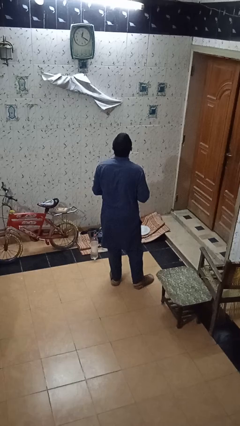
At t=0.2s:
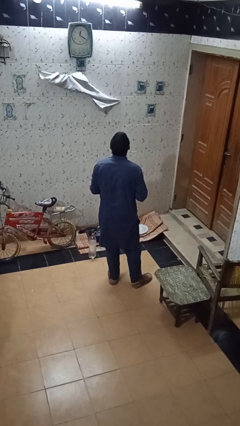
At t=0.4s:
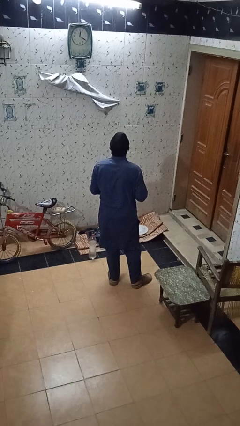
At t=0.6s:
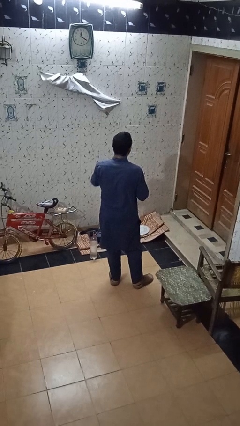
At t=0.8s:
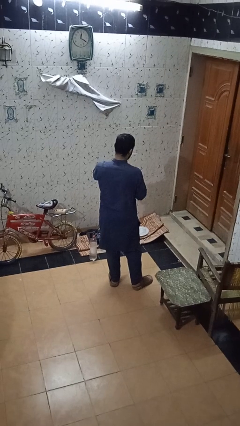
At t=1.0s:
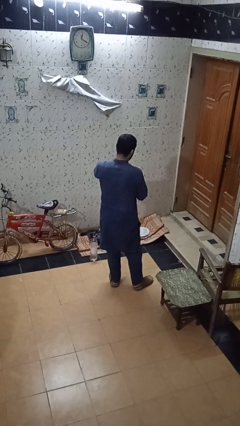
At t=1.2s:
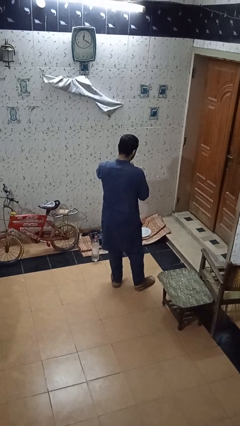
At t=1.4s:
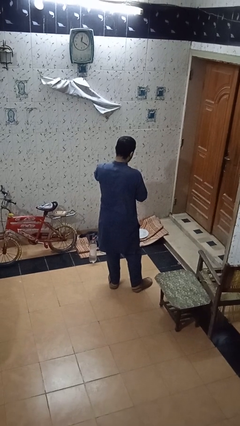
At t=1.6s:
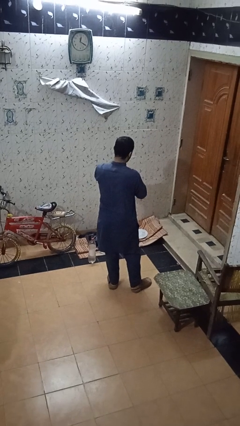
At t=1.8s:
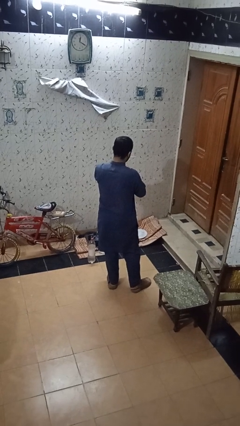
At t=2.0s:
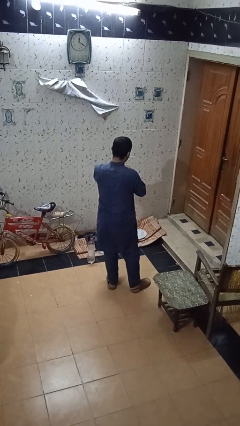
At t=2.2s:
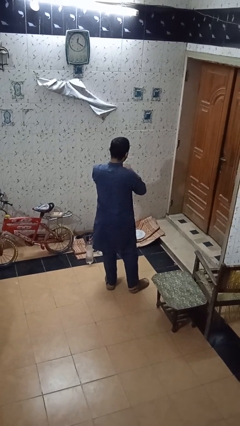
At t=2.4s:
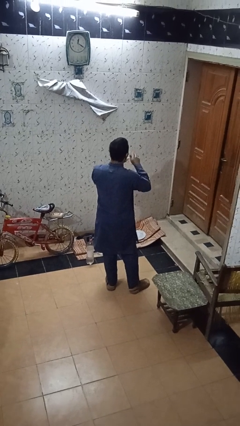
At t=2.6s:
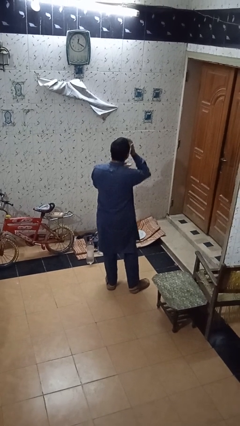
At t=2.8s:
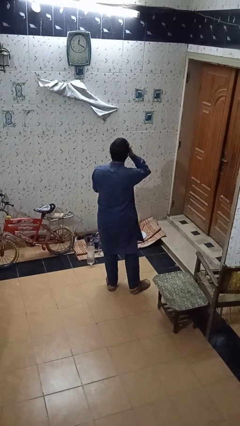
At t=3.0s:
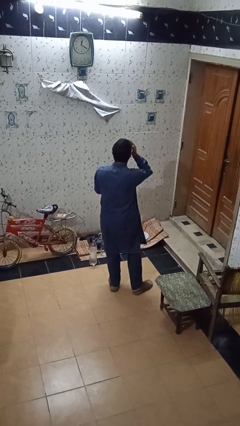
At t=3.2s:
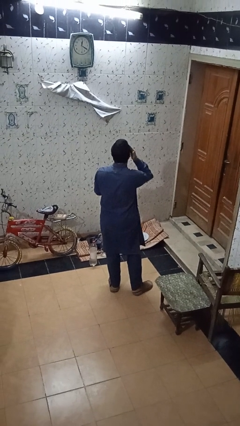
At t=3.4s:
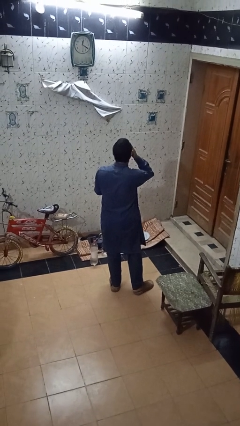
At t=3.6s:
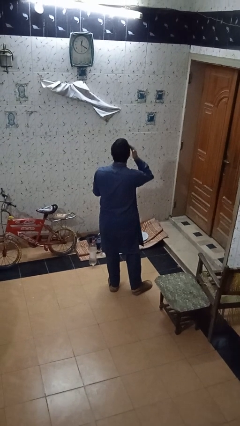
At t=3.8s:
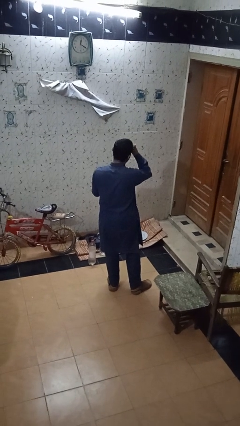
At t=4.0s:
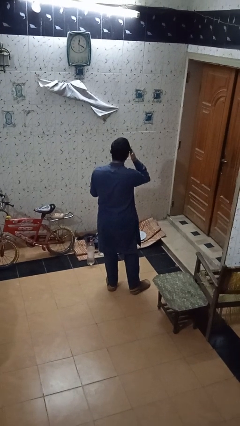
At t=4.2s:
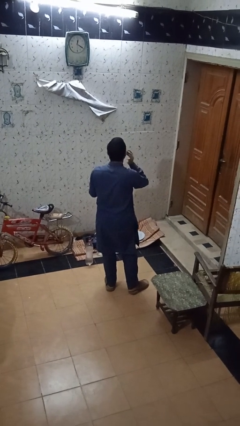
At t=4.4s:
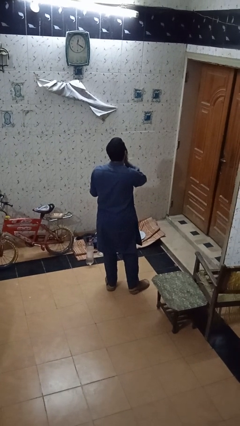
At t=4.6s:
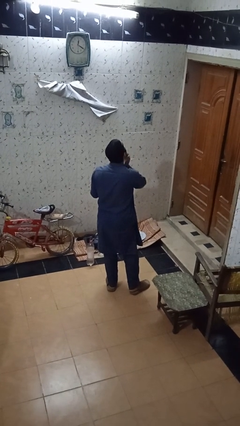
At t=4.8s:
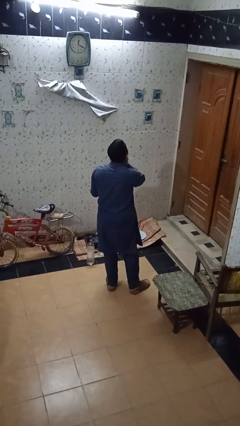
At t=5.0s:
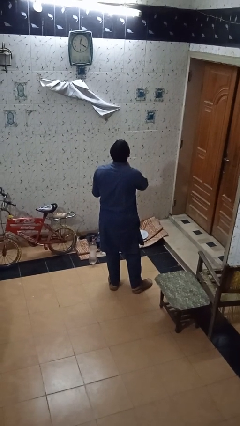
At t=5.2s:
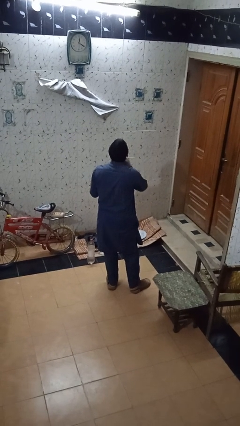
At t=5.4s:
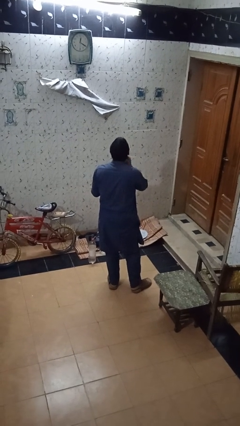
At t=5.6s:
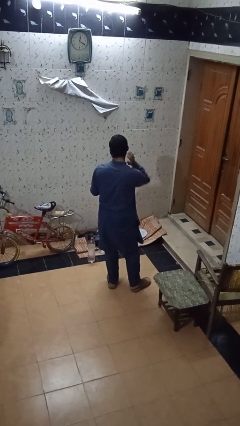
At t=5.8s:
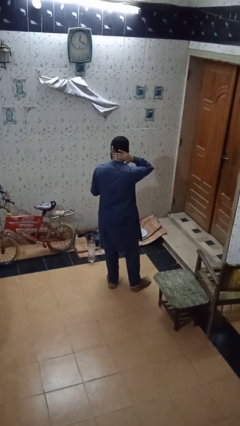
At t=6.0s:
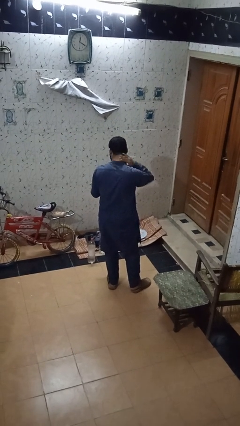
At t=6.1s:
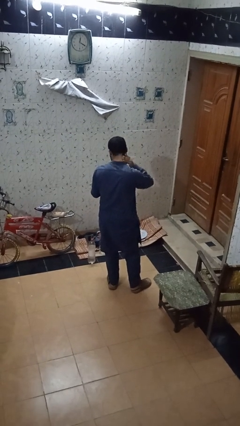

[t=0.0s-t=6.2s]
person applies sunscreen

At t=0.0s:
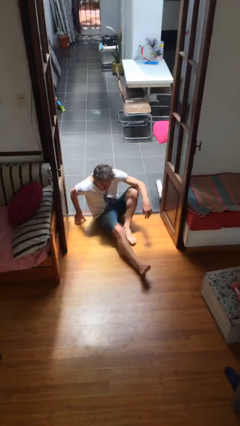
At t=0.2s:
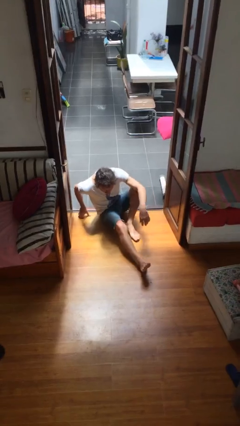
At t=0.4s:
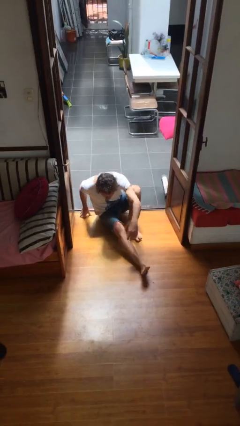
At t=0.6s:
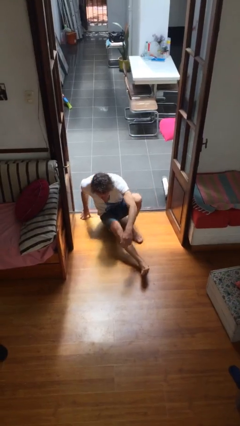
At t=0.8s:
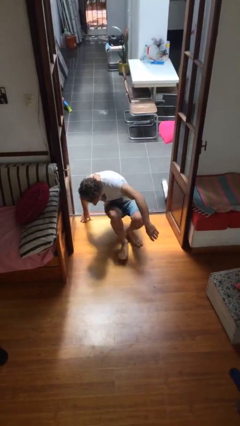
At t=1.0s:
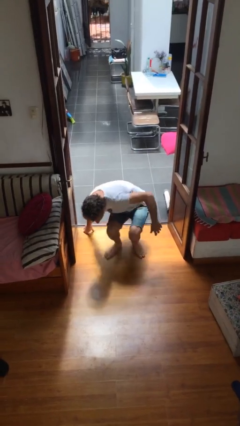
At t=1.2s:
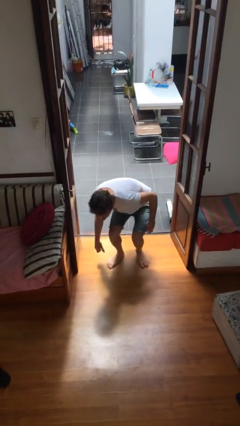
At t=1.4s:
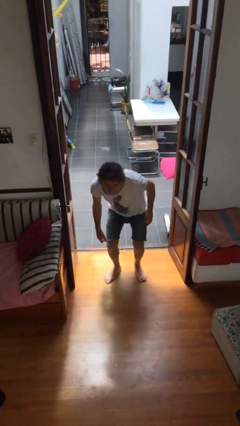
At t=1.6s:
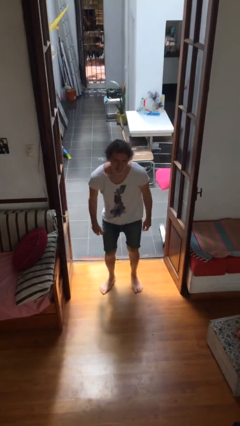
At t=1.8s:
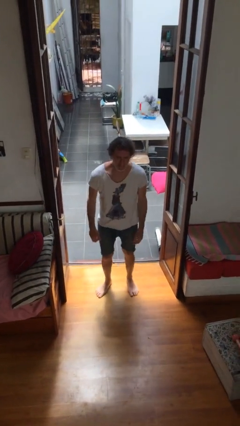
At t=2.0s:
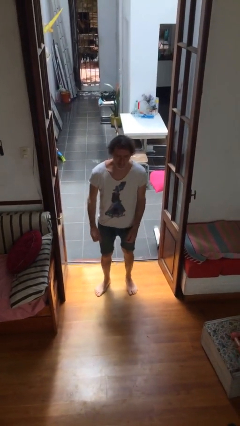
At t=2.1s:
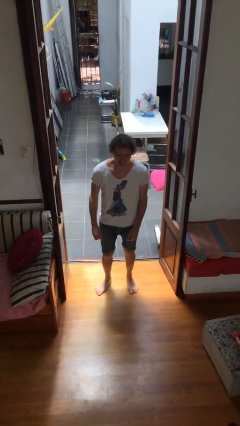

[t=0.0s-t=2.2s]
person stands up

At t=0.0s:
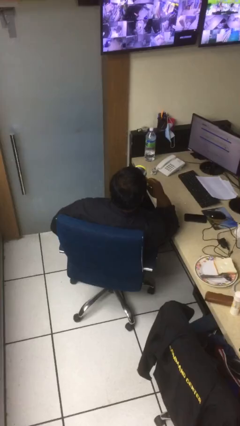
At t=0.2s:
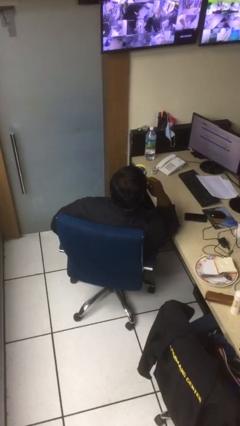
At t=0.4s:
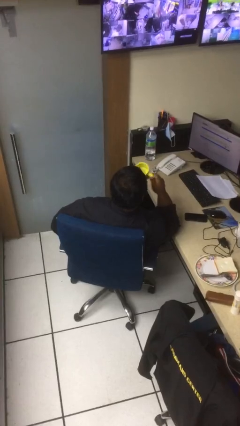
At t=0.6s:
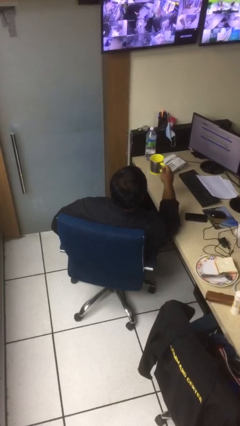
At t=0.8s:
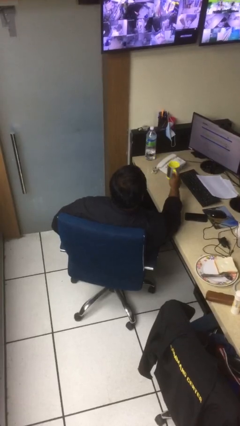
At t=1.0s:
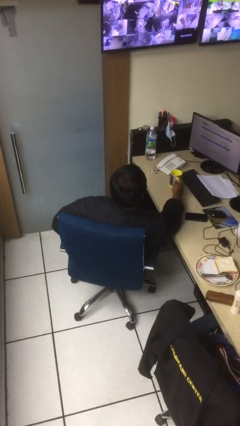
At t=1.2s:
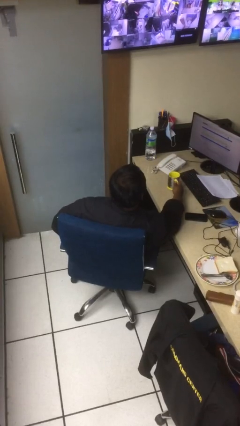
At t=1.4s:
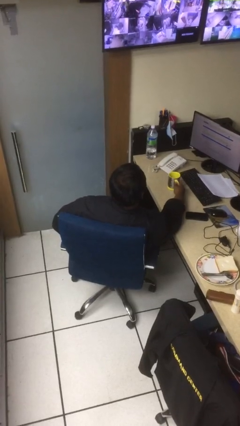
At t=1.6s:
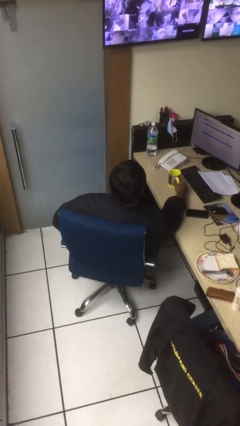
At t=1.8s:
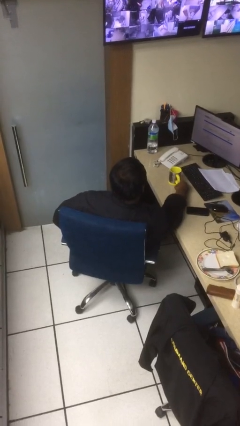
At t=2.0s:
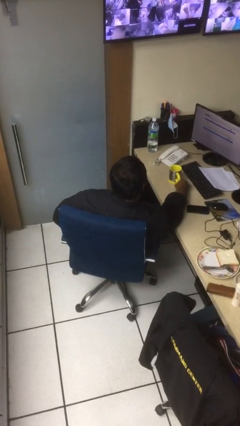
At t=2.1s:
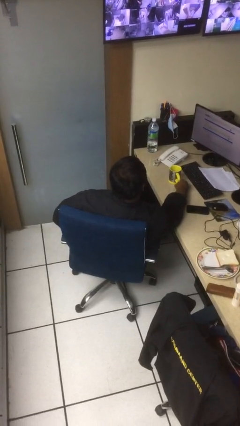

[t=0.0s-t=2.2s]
person puts down object on table

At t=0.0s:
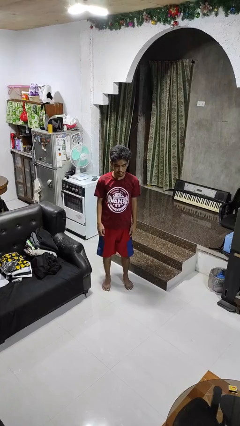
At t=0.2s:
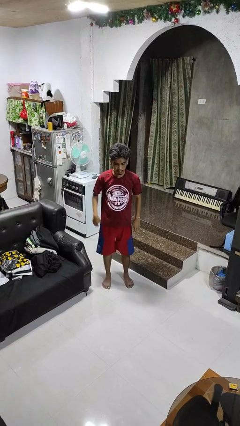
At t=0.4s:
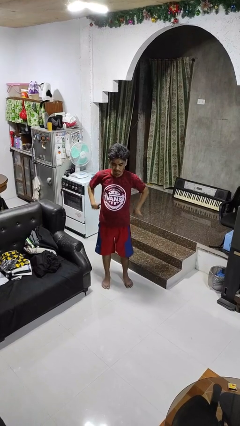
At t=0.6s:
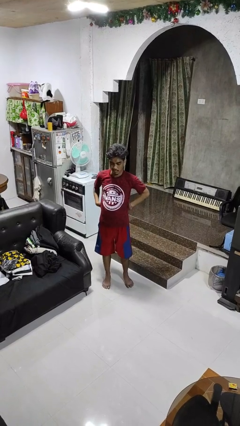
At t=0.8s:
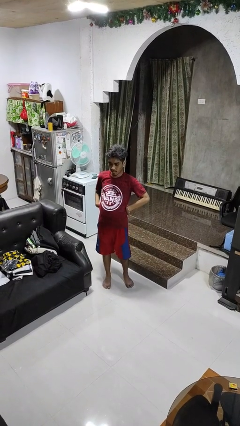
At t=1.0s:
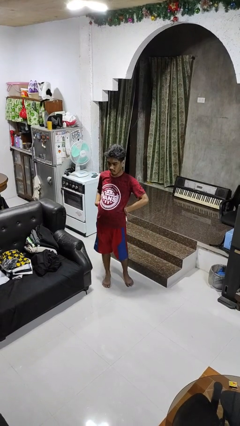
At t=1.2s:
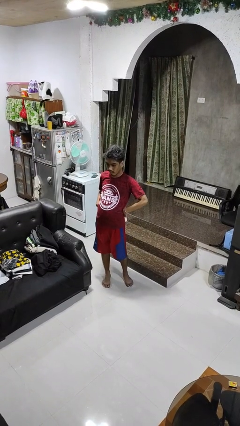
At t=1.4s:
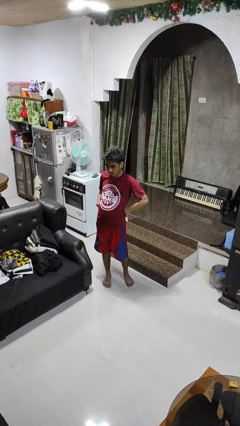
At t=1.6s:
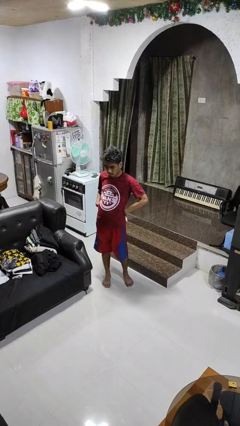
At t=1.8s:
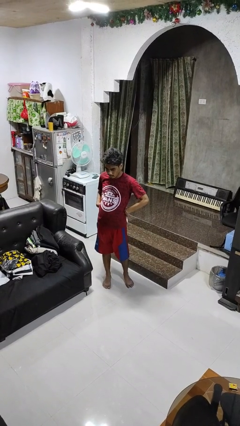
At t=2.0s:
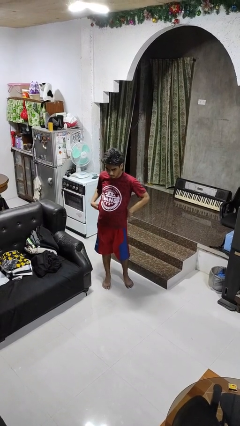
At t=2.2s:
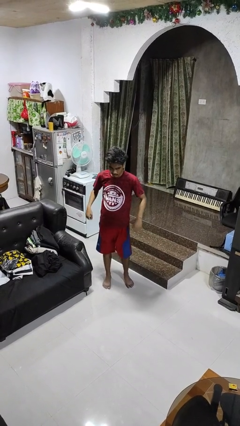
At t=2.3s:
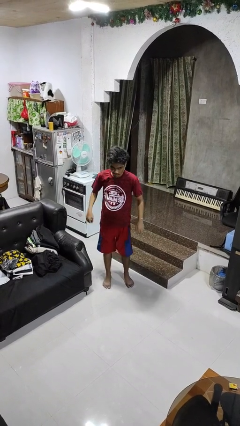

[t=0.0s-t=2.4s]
person stretches back

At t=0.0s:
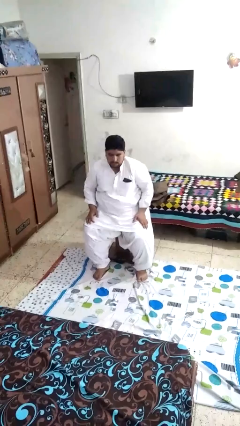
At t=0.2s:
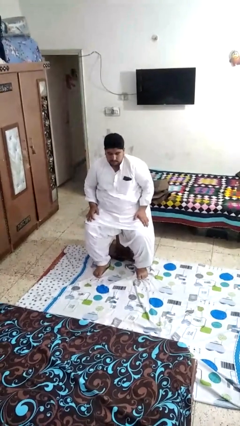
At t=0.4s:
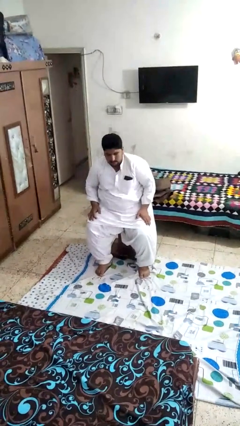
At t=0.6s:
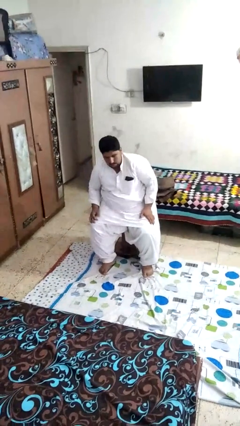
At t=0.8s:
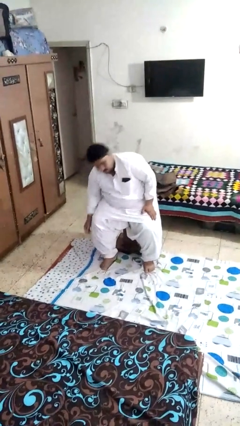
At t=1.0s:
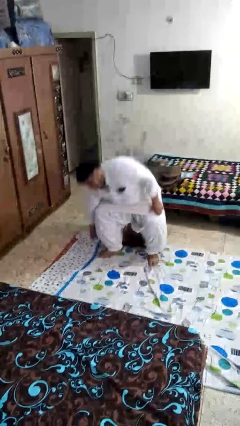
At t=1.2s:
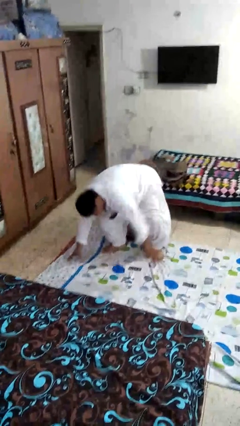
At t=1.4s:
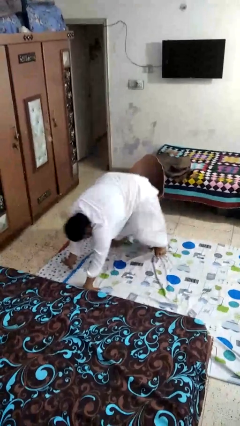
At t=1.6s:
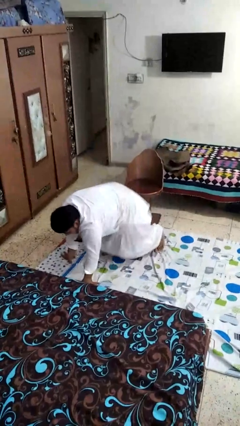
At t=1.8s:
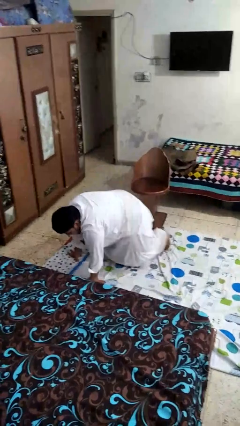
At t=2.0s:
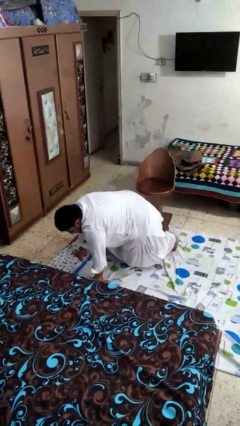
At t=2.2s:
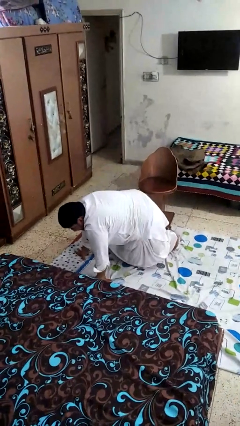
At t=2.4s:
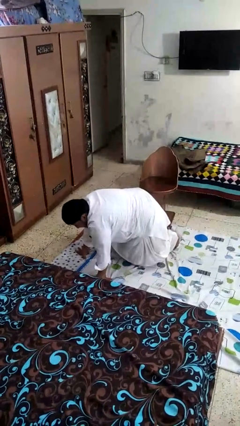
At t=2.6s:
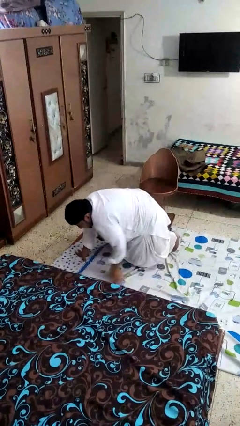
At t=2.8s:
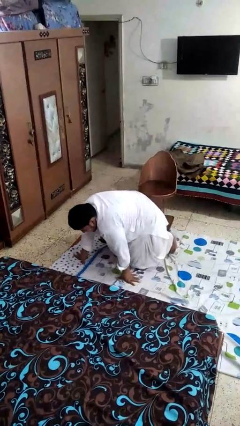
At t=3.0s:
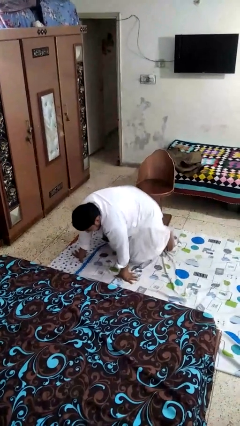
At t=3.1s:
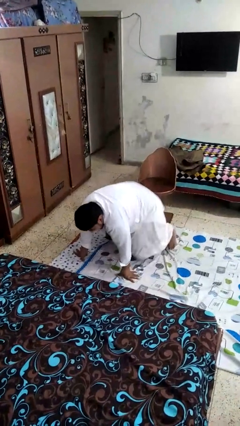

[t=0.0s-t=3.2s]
person falls from chair

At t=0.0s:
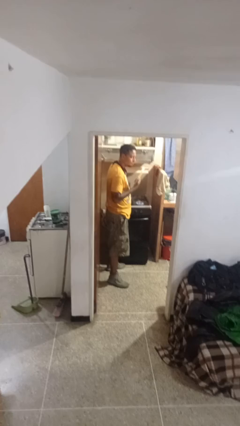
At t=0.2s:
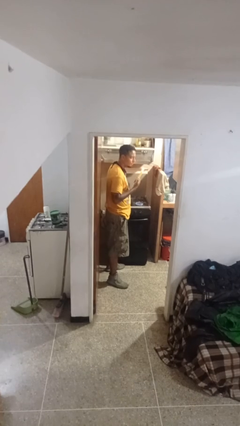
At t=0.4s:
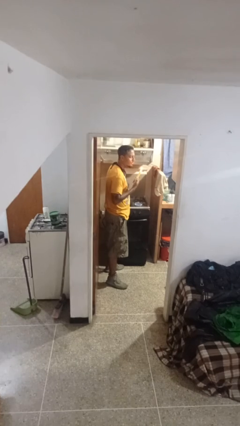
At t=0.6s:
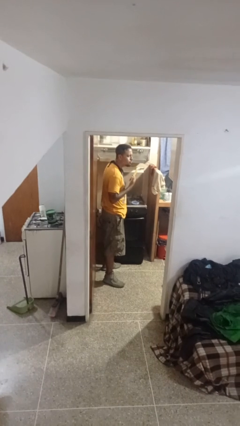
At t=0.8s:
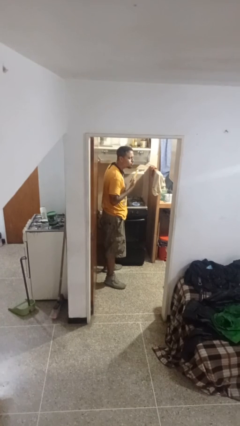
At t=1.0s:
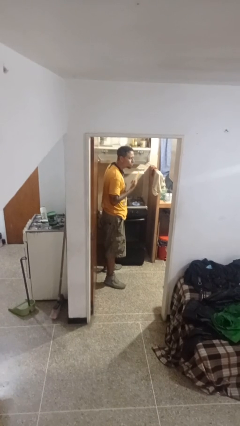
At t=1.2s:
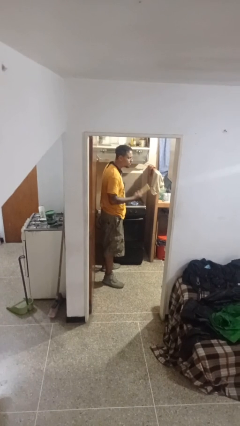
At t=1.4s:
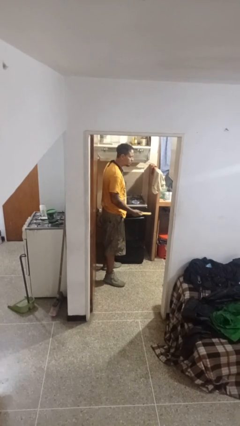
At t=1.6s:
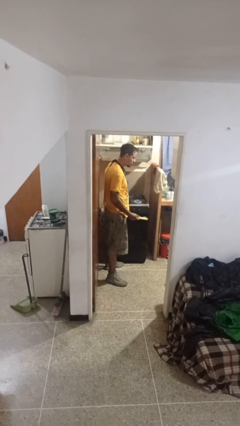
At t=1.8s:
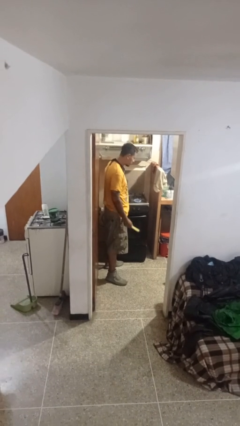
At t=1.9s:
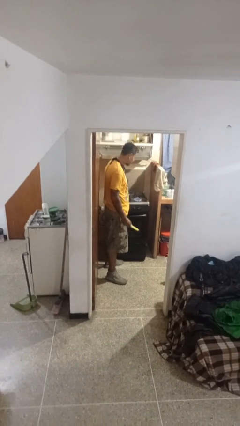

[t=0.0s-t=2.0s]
person extinguishes candle
